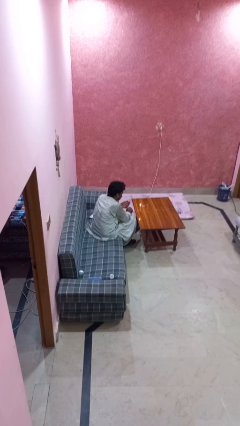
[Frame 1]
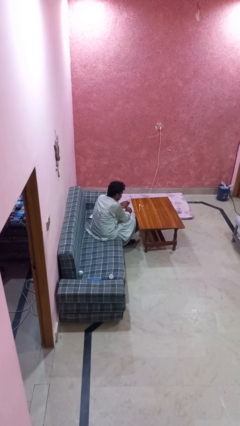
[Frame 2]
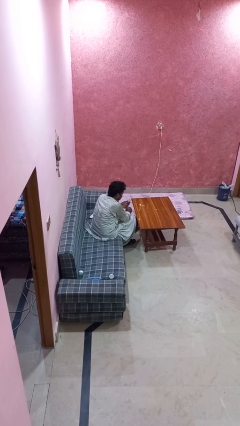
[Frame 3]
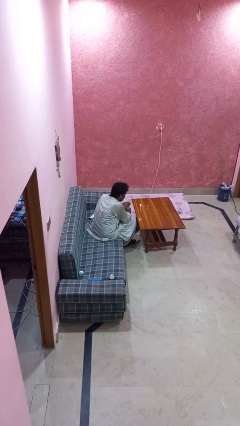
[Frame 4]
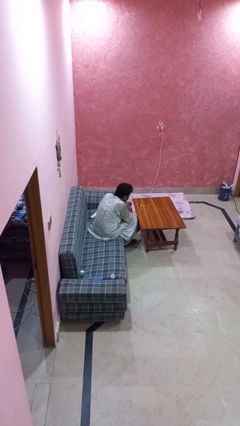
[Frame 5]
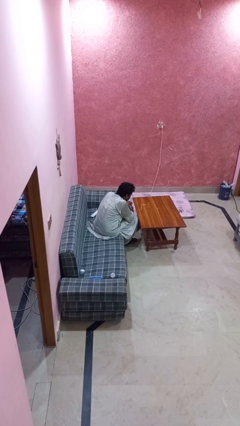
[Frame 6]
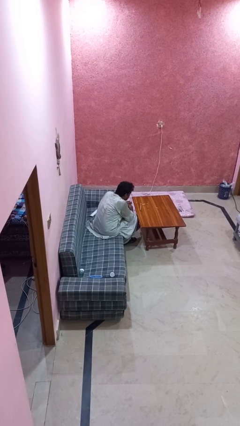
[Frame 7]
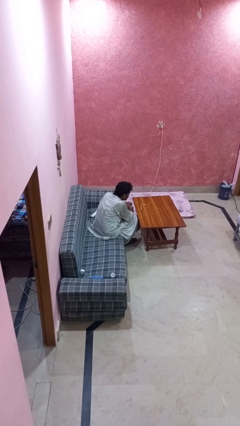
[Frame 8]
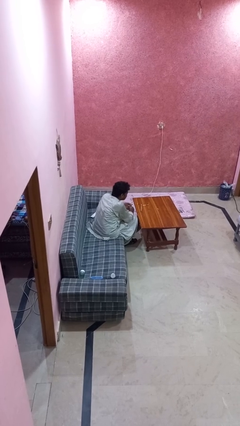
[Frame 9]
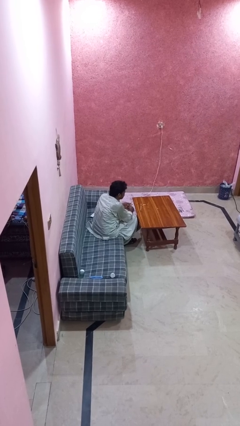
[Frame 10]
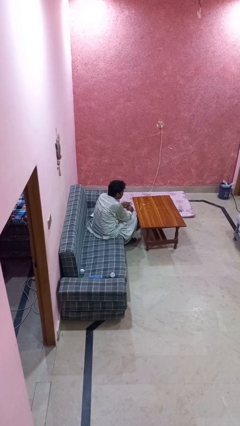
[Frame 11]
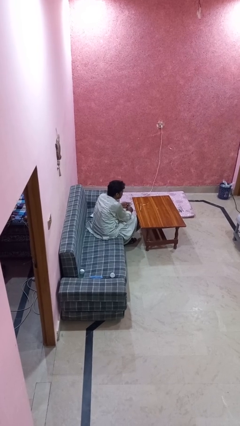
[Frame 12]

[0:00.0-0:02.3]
person extinguishes candle

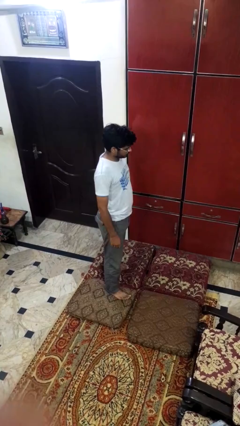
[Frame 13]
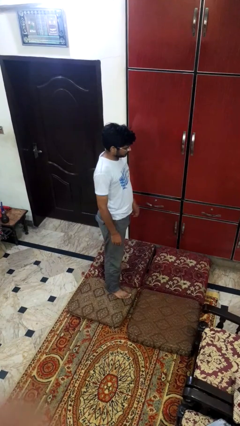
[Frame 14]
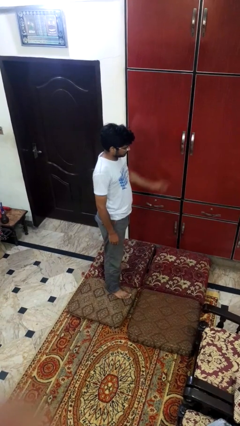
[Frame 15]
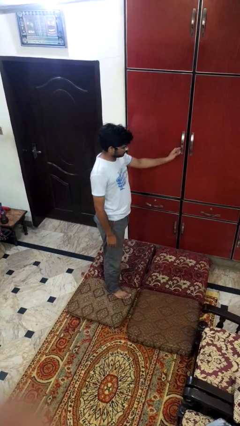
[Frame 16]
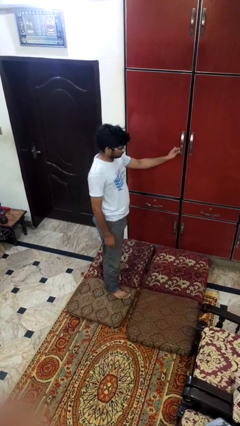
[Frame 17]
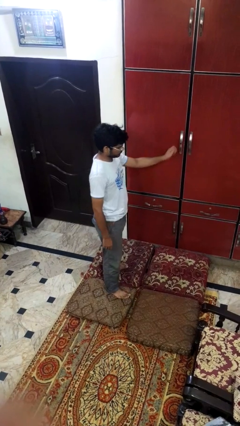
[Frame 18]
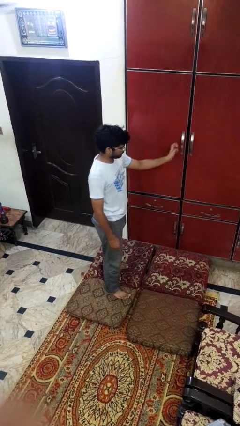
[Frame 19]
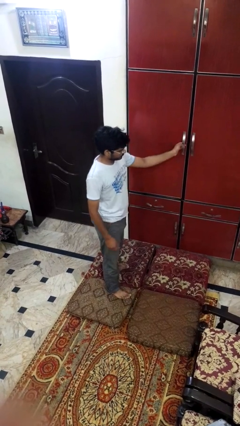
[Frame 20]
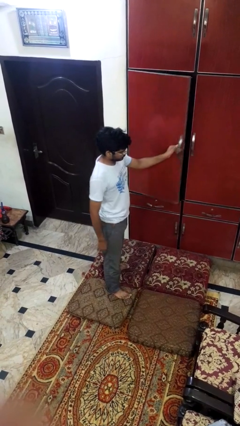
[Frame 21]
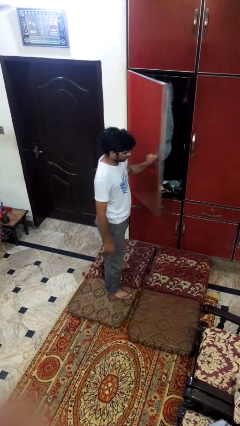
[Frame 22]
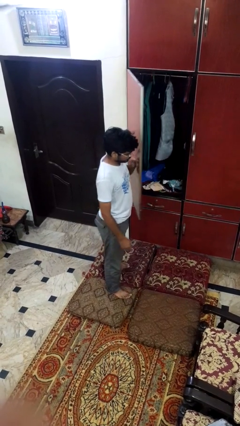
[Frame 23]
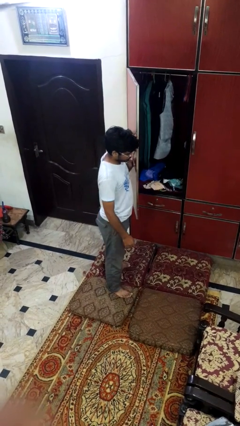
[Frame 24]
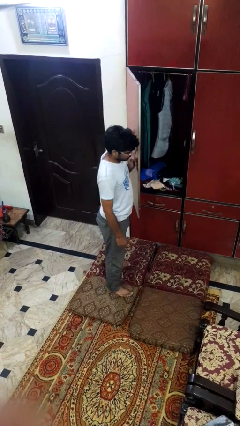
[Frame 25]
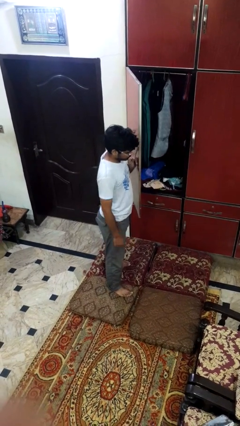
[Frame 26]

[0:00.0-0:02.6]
person opens closet door

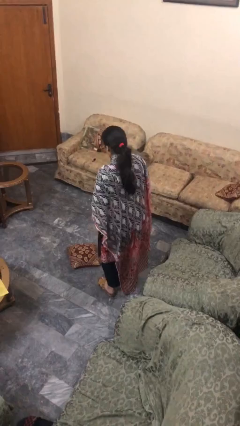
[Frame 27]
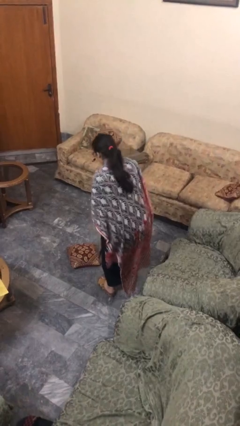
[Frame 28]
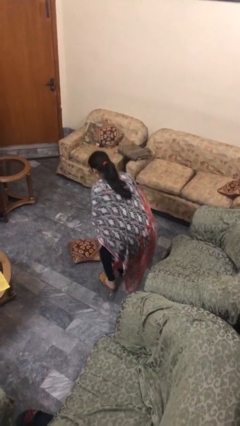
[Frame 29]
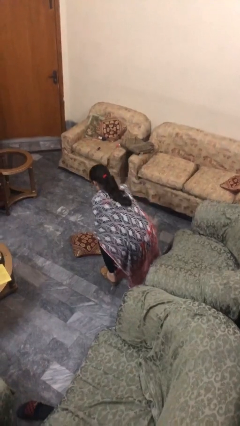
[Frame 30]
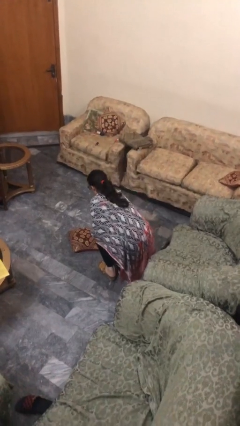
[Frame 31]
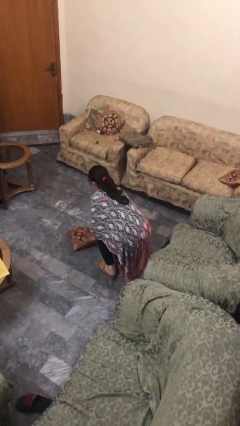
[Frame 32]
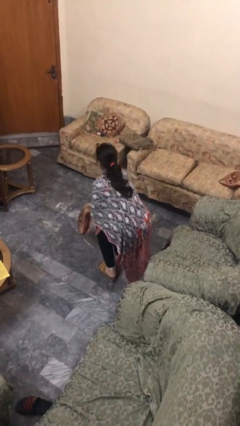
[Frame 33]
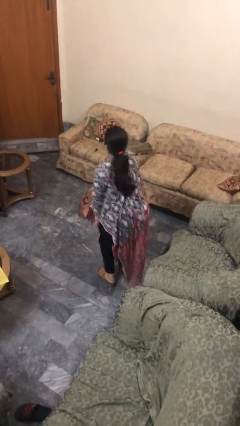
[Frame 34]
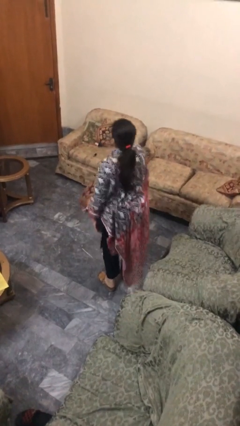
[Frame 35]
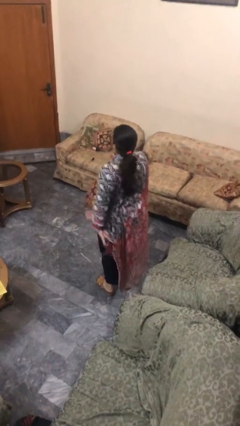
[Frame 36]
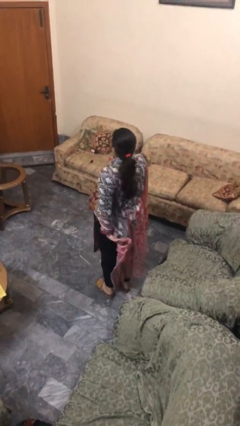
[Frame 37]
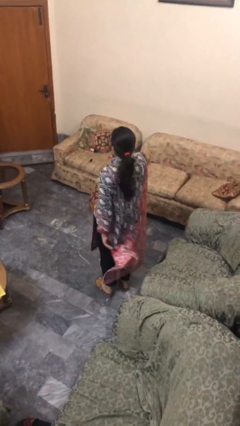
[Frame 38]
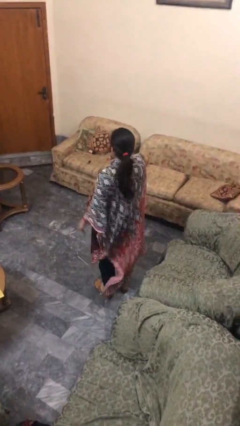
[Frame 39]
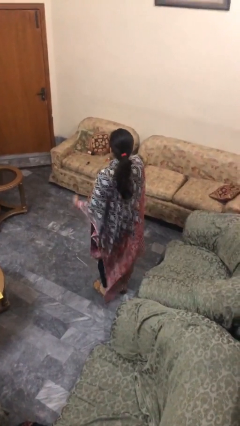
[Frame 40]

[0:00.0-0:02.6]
person picks up object from floor

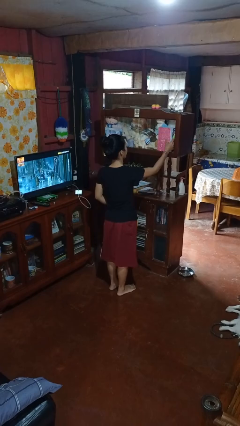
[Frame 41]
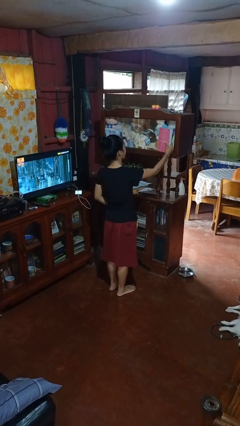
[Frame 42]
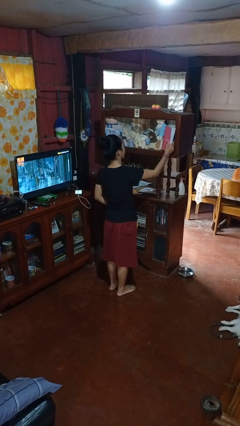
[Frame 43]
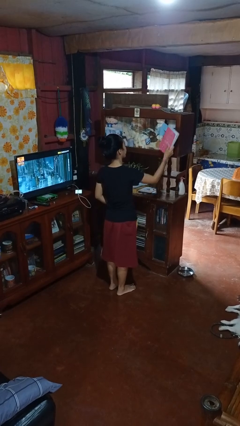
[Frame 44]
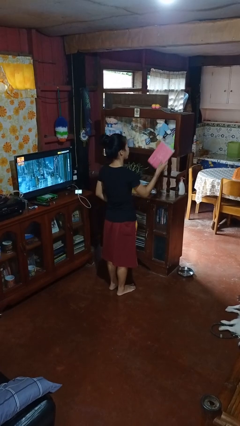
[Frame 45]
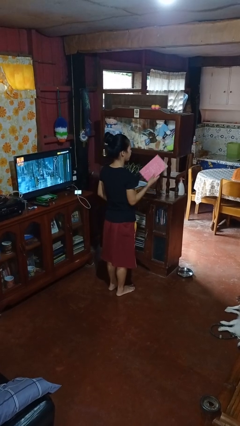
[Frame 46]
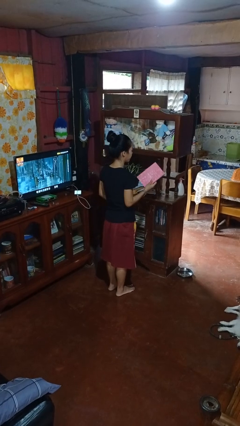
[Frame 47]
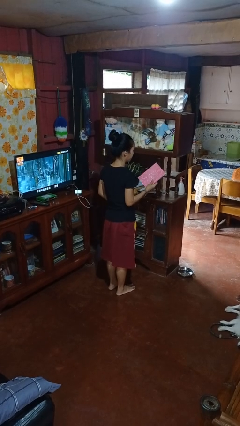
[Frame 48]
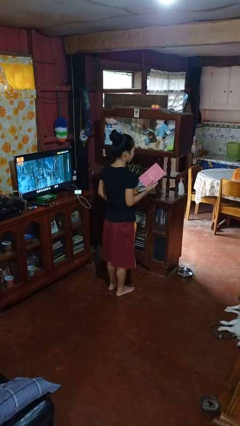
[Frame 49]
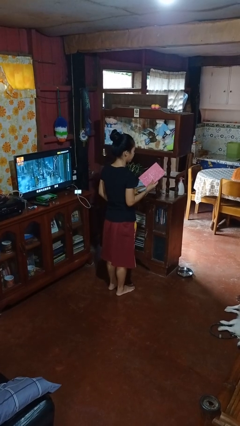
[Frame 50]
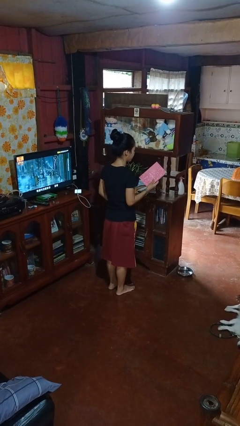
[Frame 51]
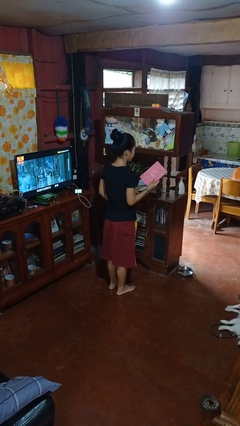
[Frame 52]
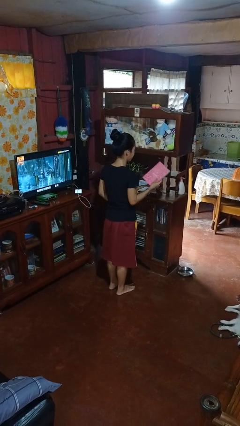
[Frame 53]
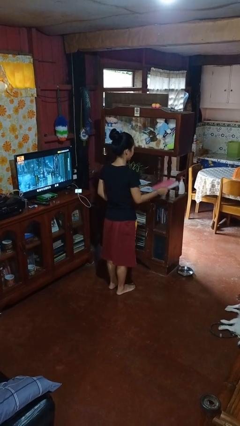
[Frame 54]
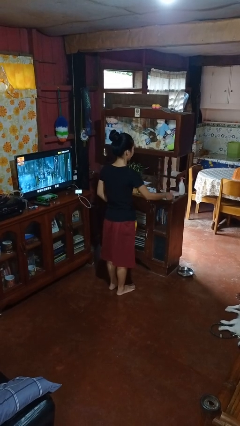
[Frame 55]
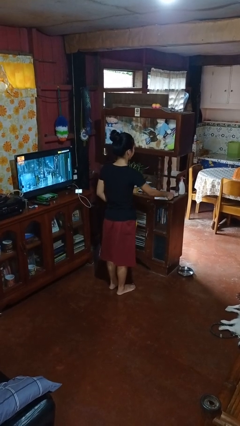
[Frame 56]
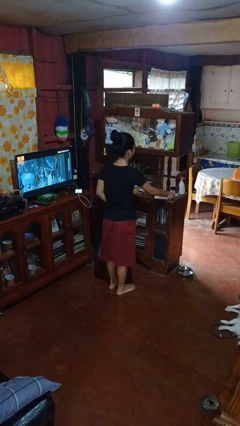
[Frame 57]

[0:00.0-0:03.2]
person picks up object from shelf

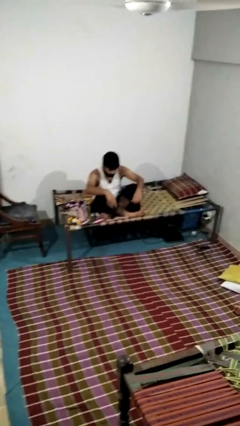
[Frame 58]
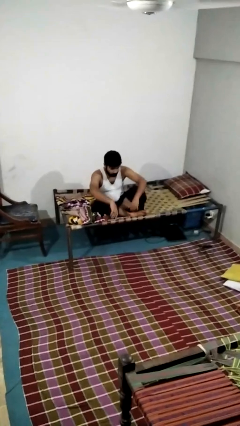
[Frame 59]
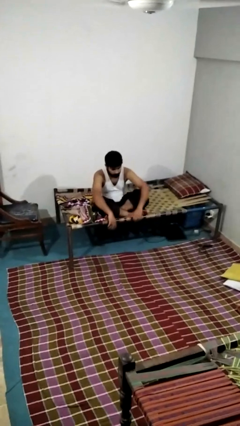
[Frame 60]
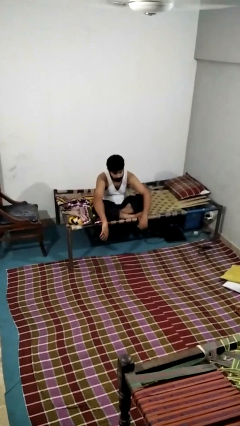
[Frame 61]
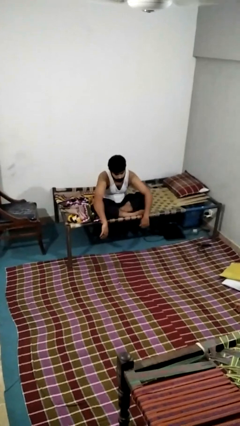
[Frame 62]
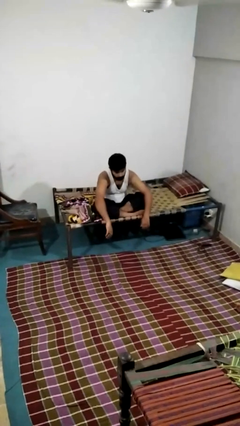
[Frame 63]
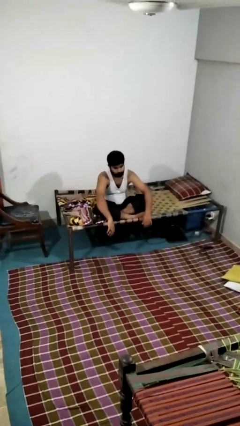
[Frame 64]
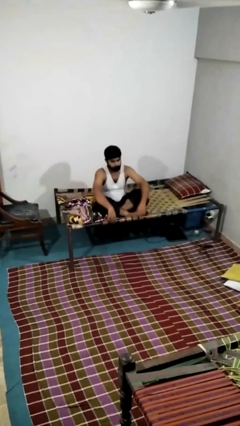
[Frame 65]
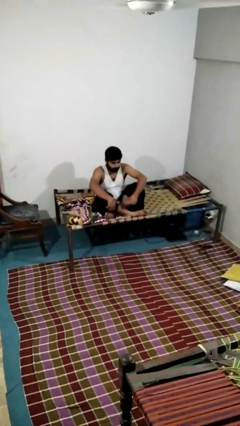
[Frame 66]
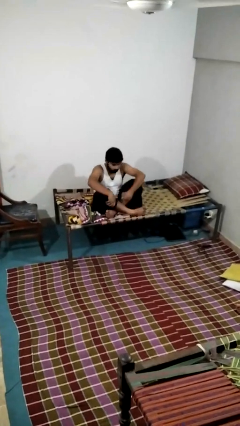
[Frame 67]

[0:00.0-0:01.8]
person crosses legs

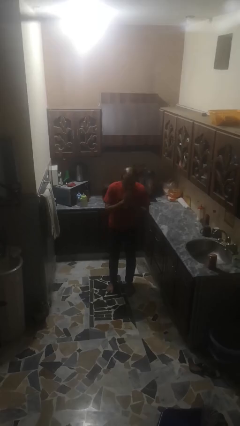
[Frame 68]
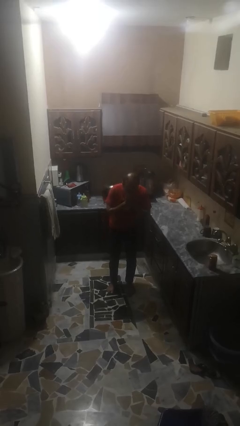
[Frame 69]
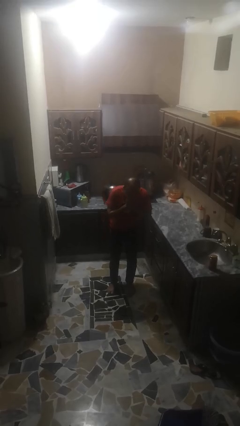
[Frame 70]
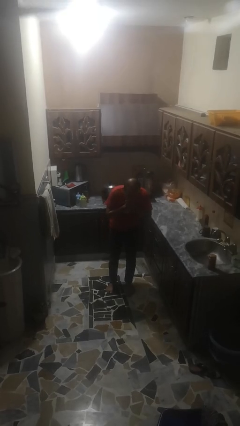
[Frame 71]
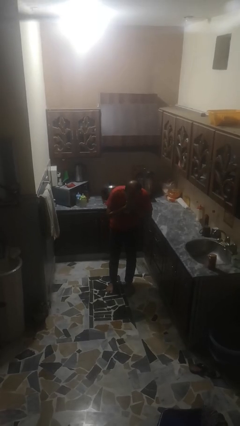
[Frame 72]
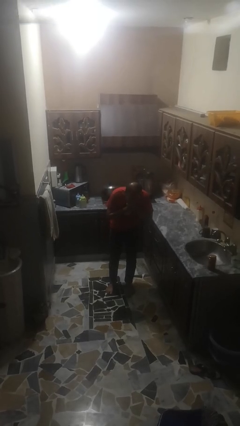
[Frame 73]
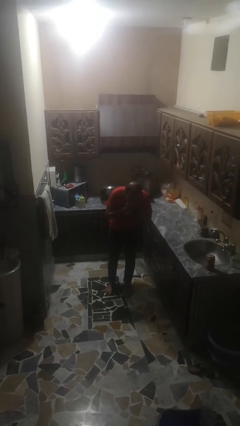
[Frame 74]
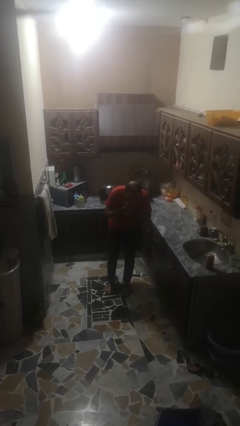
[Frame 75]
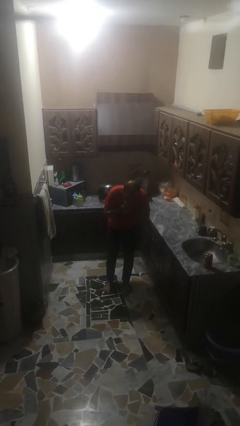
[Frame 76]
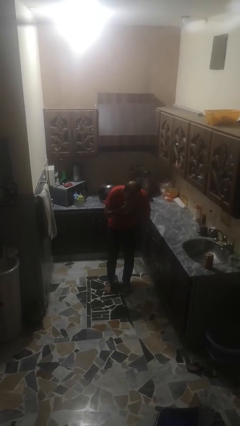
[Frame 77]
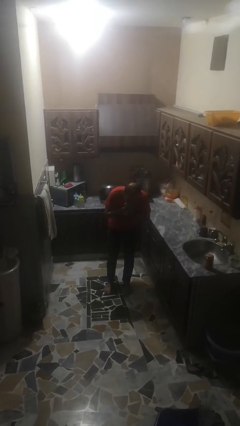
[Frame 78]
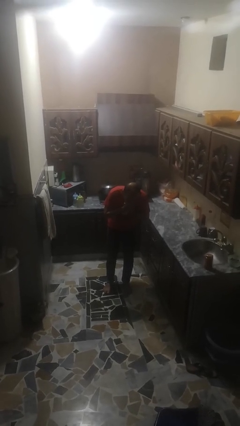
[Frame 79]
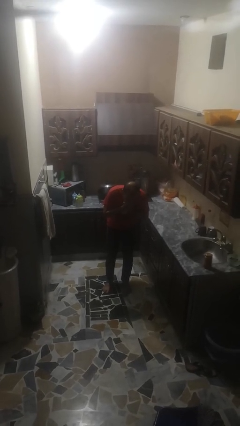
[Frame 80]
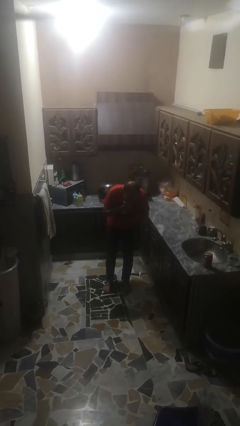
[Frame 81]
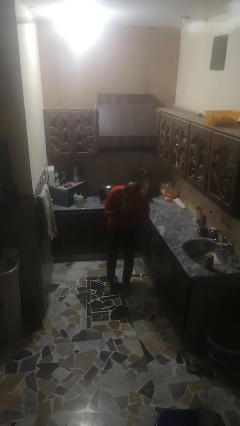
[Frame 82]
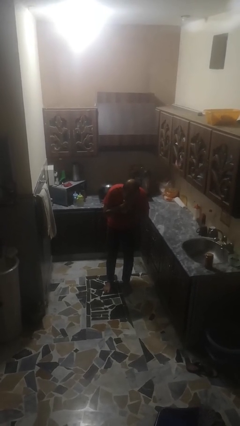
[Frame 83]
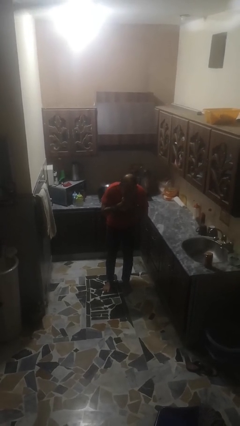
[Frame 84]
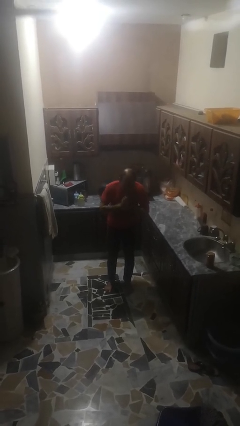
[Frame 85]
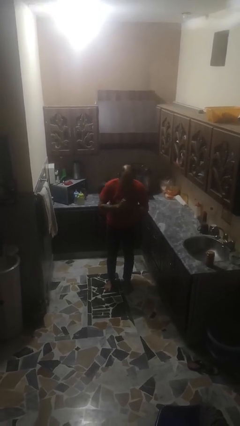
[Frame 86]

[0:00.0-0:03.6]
person sneezes into hand

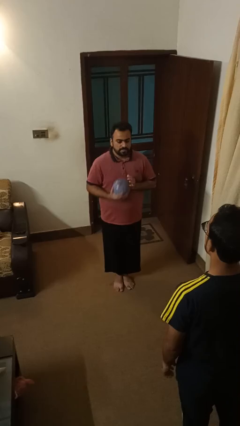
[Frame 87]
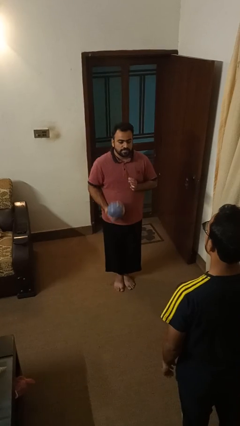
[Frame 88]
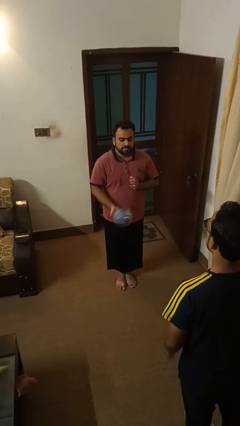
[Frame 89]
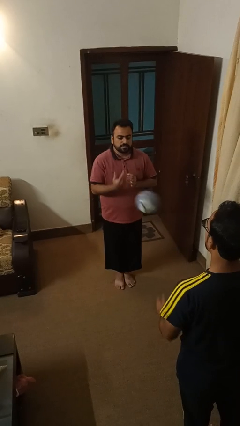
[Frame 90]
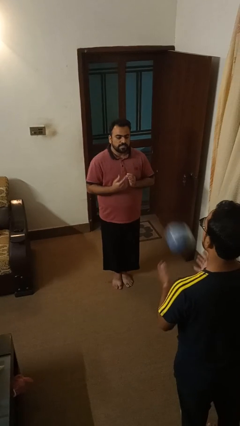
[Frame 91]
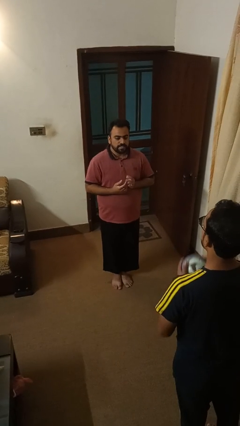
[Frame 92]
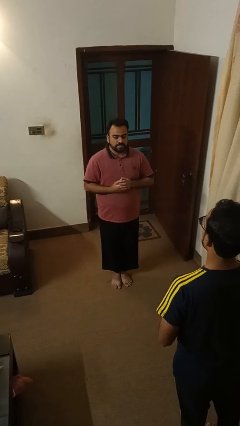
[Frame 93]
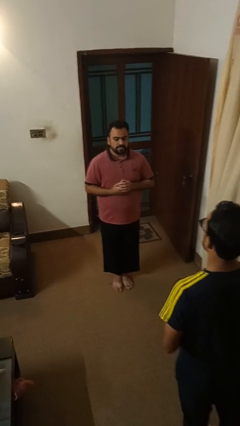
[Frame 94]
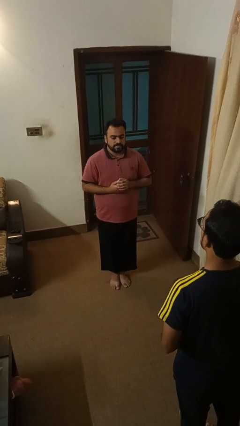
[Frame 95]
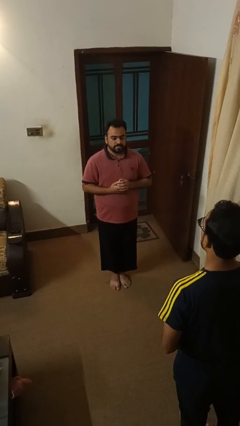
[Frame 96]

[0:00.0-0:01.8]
person throws object to person
